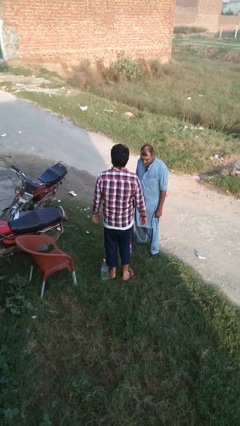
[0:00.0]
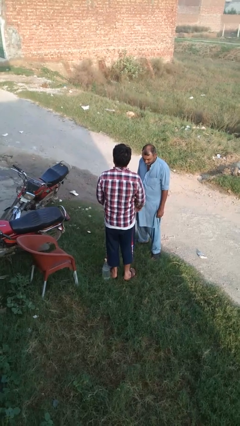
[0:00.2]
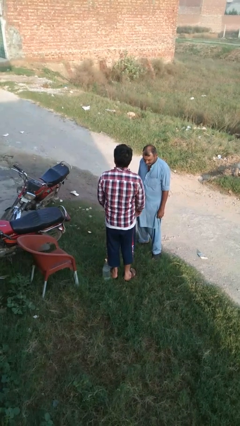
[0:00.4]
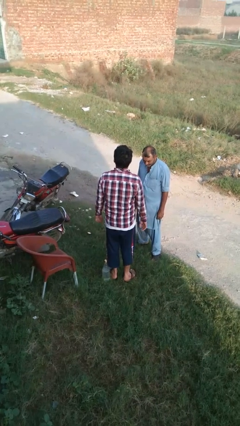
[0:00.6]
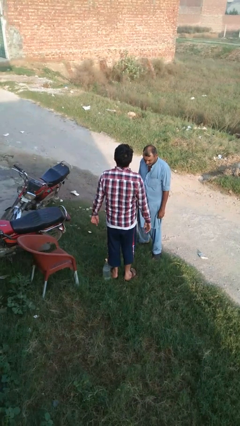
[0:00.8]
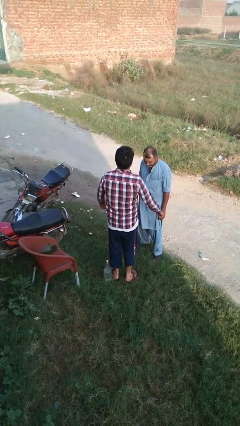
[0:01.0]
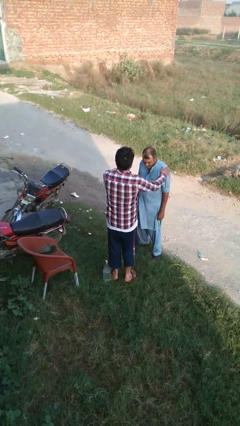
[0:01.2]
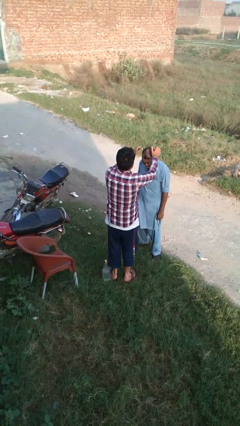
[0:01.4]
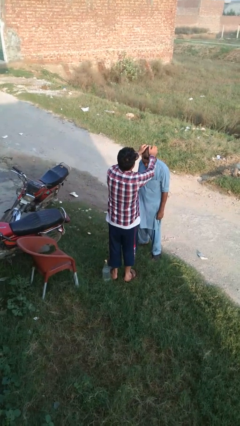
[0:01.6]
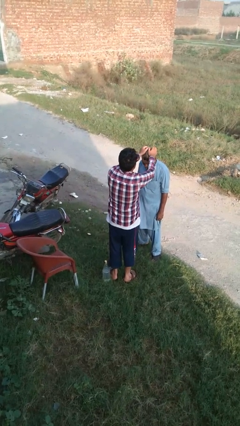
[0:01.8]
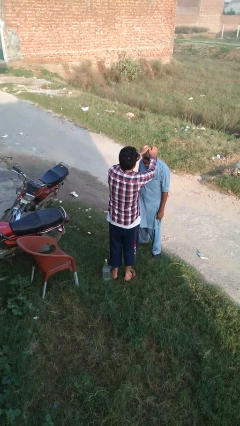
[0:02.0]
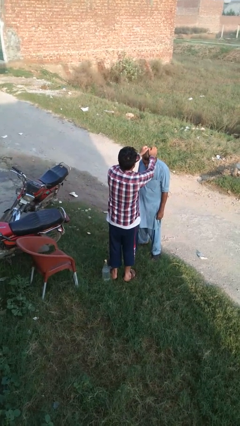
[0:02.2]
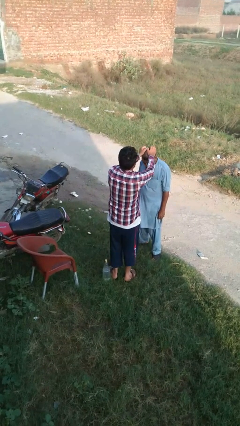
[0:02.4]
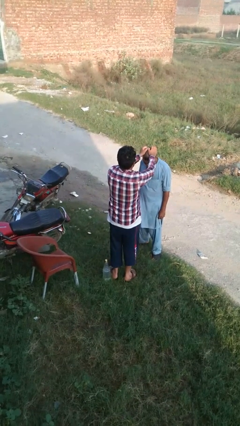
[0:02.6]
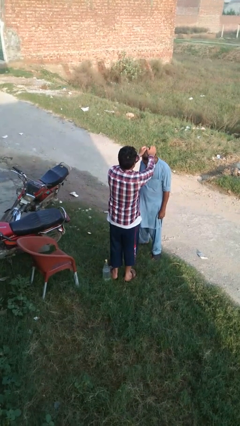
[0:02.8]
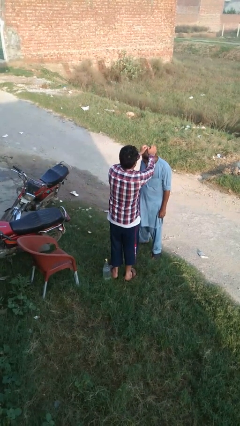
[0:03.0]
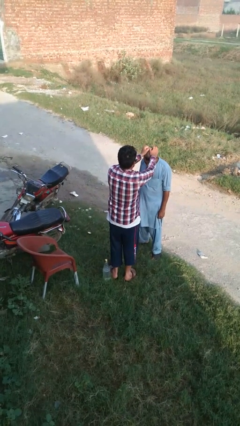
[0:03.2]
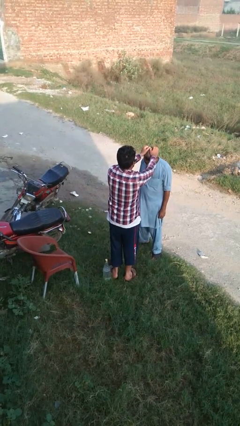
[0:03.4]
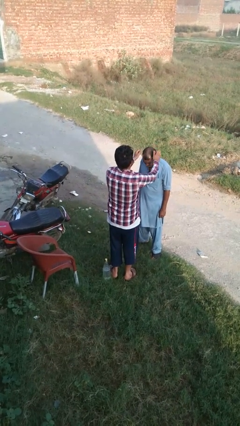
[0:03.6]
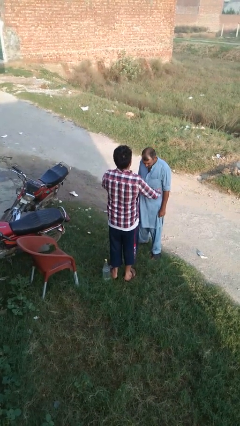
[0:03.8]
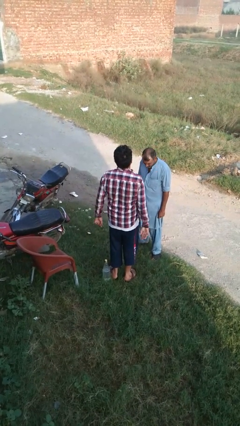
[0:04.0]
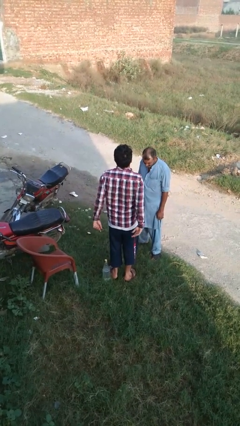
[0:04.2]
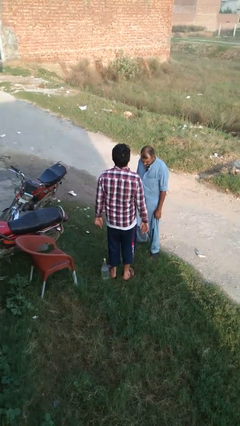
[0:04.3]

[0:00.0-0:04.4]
person grabs person by hair

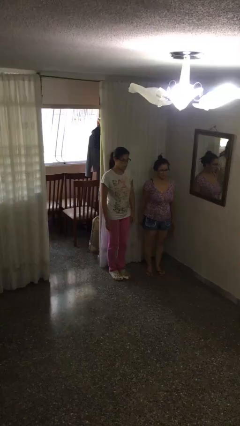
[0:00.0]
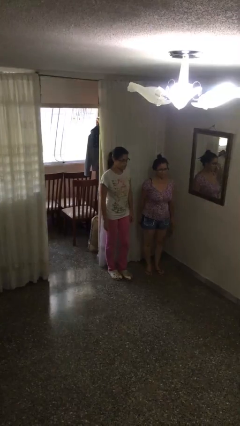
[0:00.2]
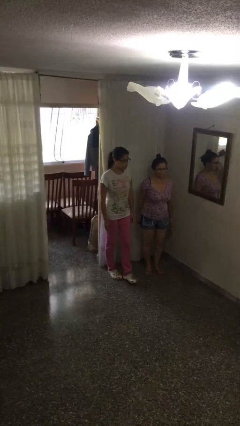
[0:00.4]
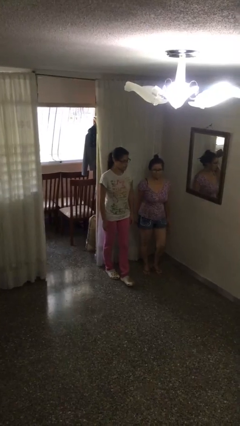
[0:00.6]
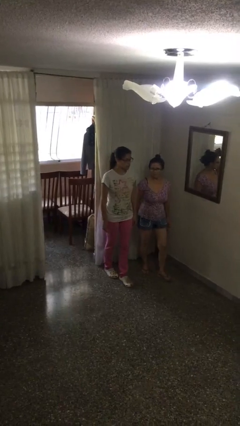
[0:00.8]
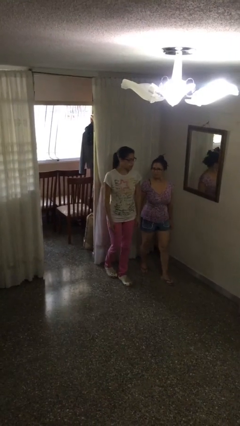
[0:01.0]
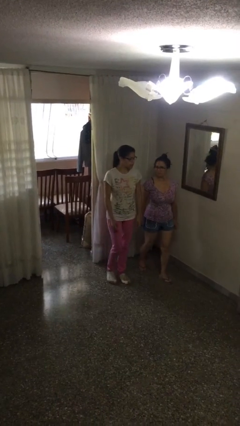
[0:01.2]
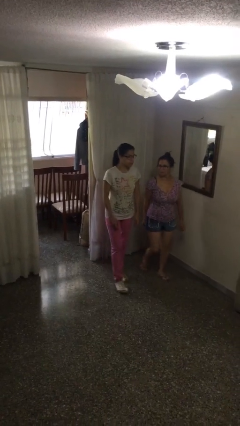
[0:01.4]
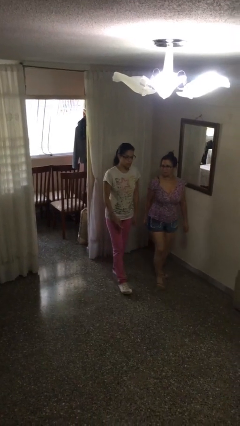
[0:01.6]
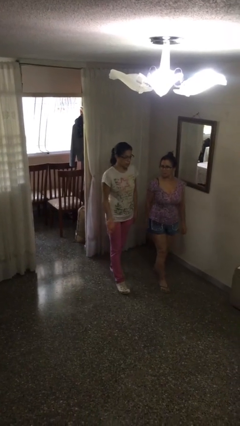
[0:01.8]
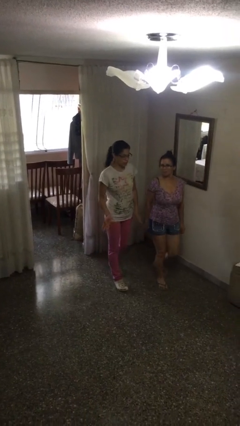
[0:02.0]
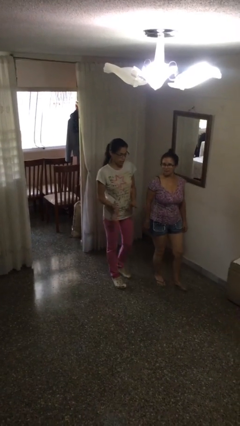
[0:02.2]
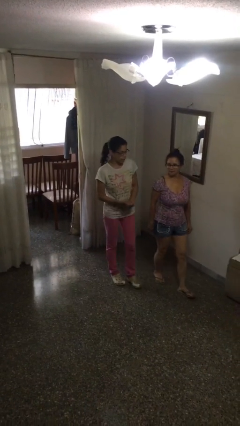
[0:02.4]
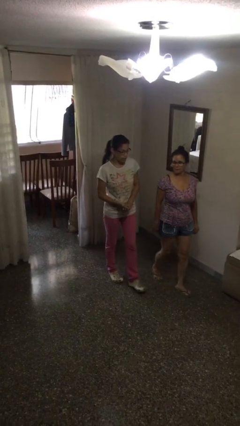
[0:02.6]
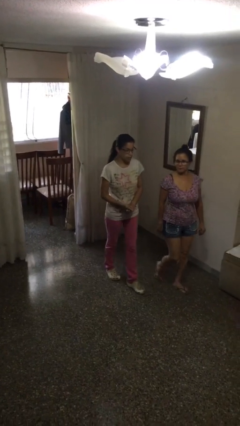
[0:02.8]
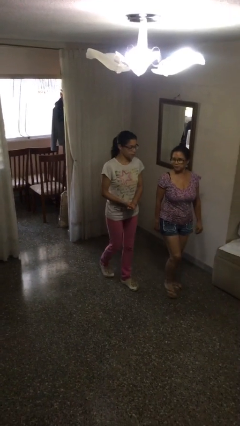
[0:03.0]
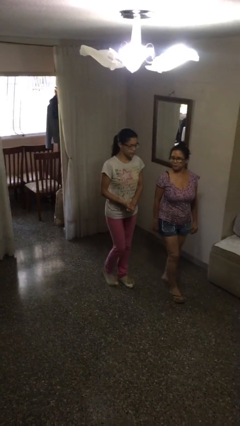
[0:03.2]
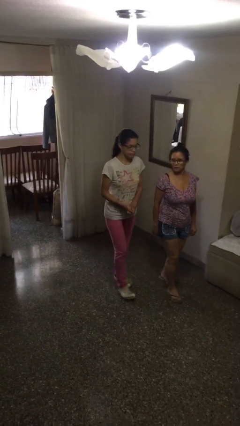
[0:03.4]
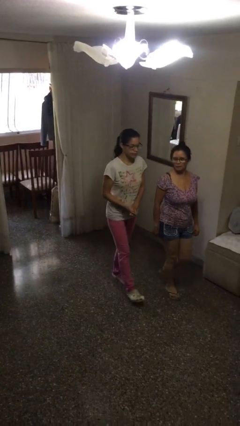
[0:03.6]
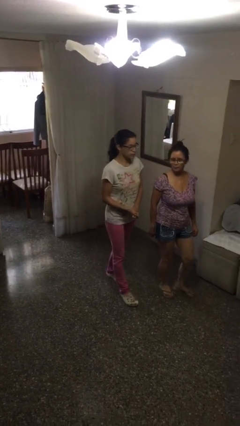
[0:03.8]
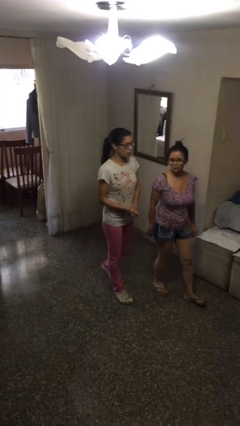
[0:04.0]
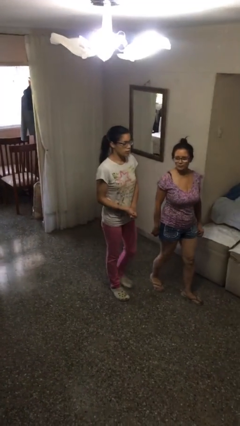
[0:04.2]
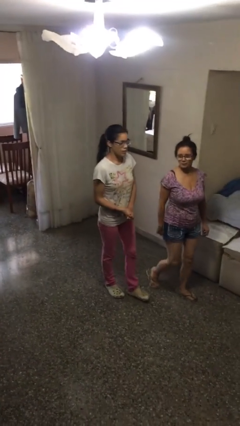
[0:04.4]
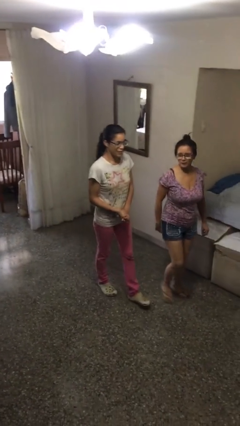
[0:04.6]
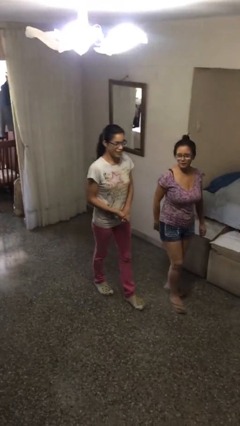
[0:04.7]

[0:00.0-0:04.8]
person talks to person

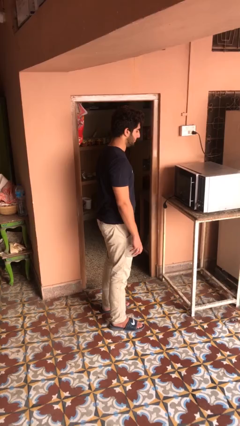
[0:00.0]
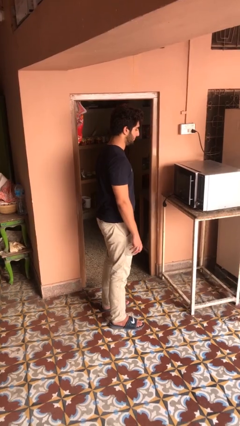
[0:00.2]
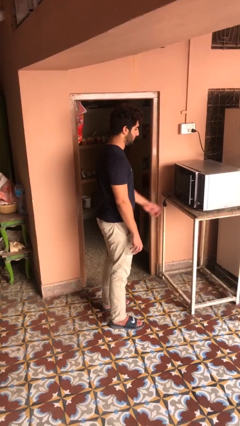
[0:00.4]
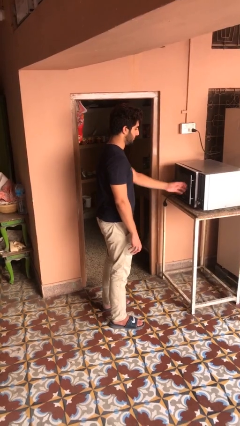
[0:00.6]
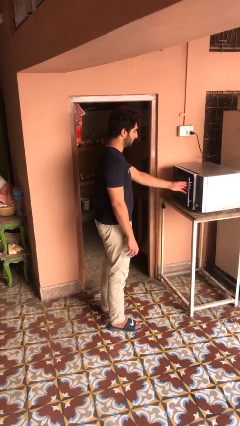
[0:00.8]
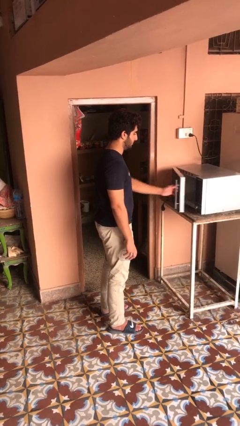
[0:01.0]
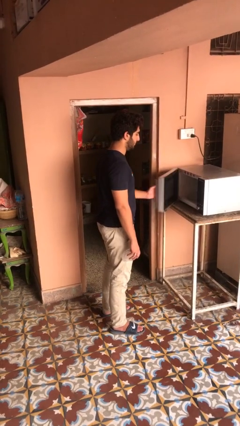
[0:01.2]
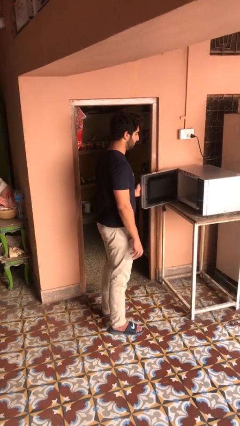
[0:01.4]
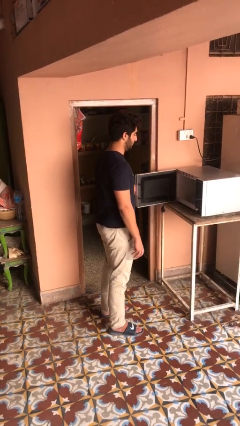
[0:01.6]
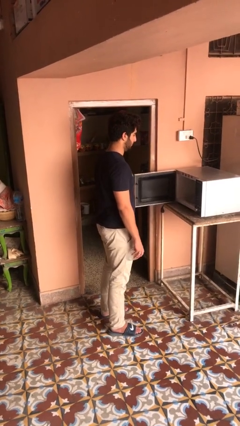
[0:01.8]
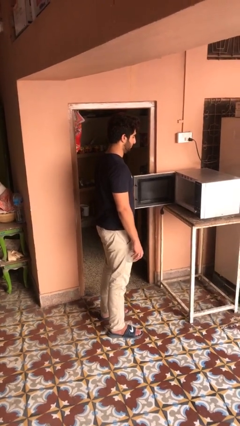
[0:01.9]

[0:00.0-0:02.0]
person opens microwave

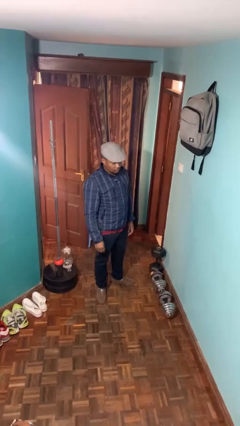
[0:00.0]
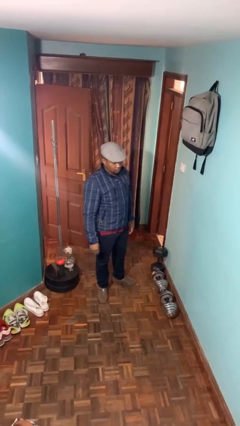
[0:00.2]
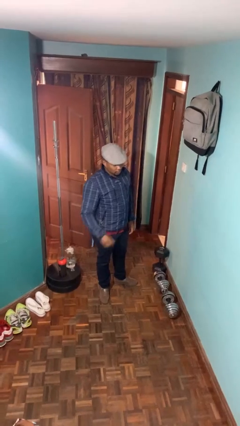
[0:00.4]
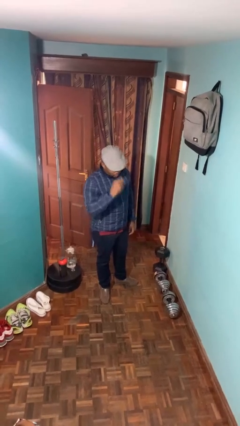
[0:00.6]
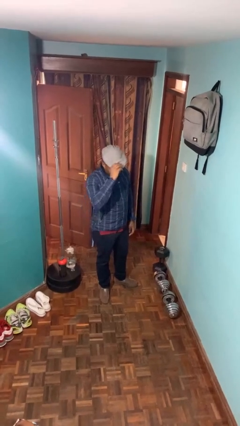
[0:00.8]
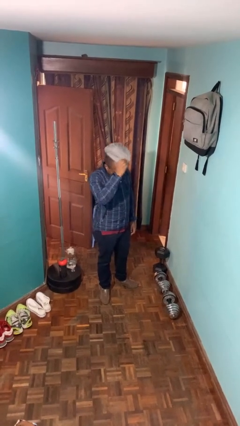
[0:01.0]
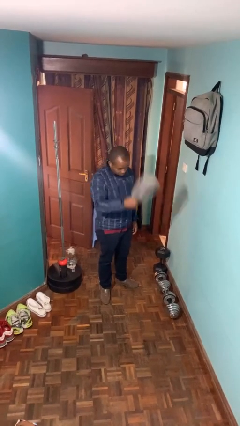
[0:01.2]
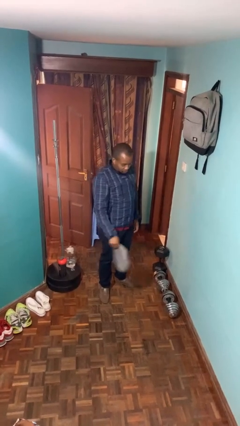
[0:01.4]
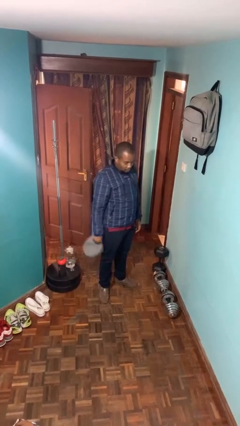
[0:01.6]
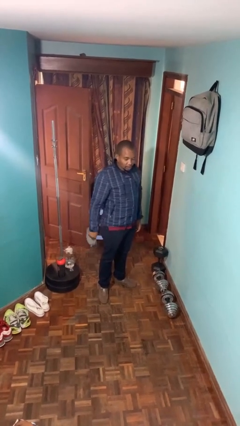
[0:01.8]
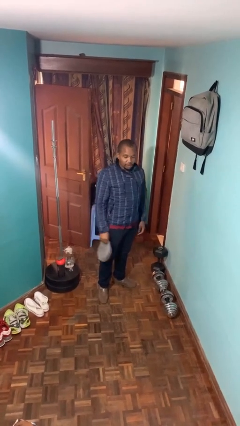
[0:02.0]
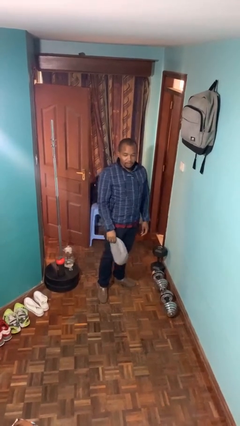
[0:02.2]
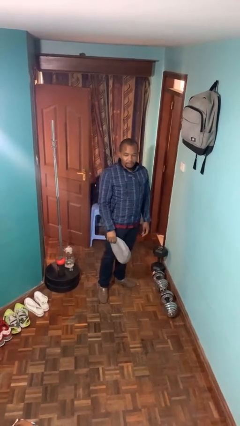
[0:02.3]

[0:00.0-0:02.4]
person takes off hat

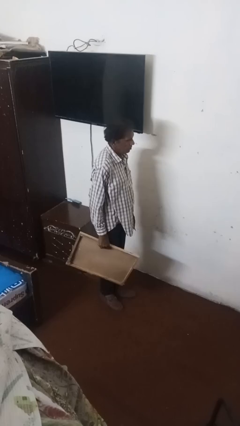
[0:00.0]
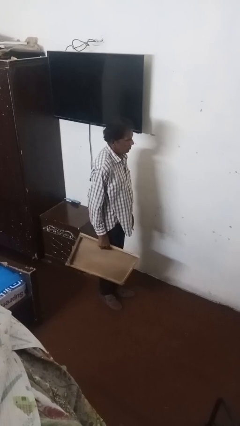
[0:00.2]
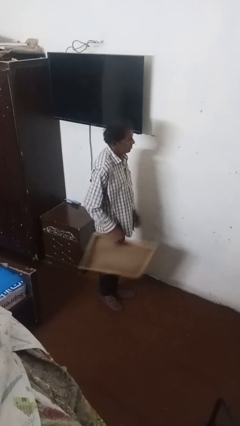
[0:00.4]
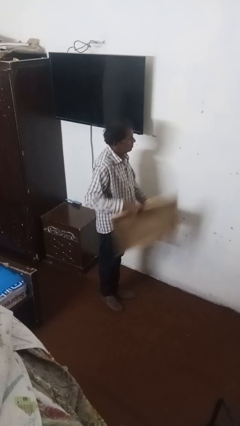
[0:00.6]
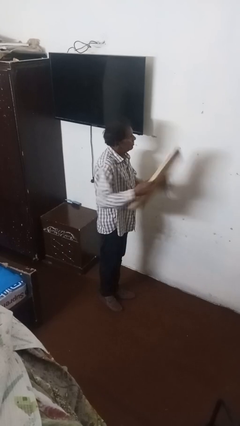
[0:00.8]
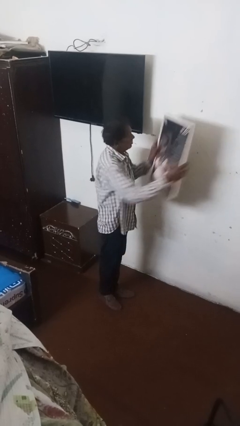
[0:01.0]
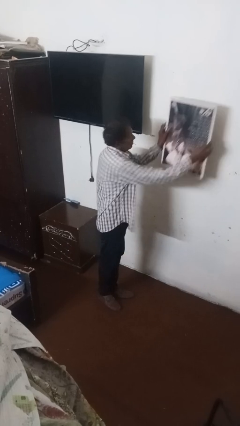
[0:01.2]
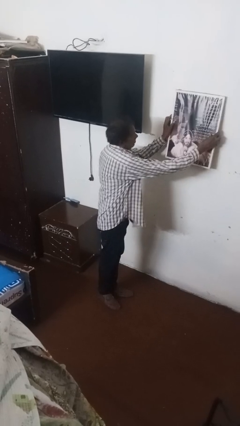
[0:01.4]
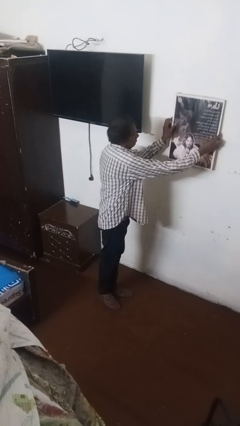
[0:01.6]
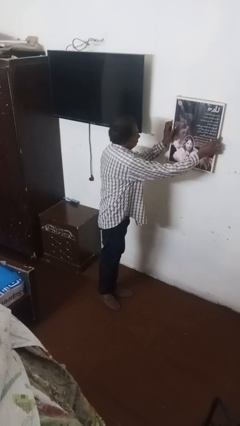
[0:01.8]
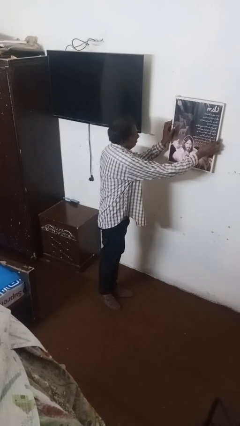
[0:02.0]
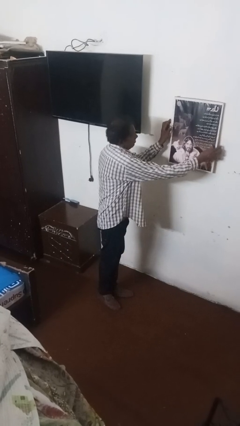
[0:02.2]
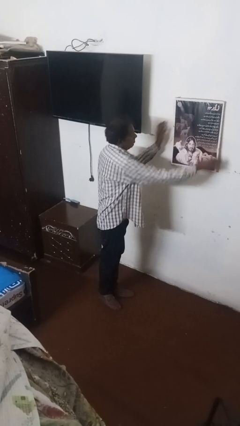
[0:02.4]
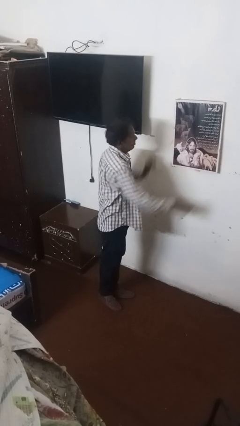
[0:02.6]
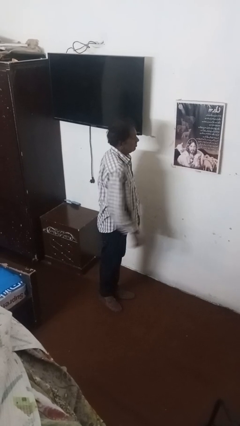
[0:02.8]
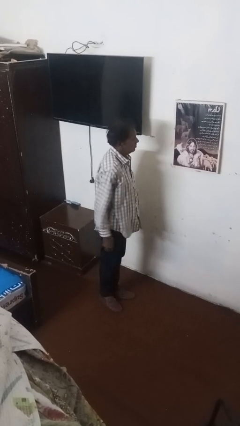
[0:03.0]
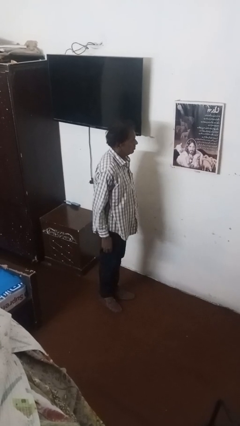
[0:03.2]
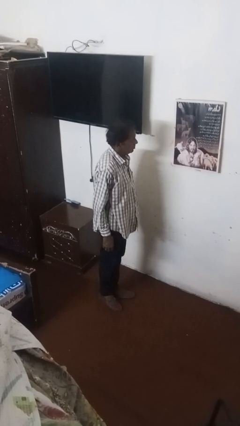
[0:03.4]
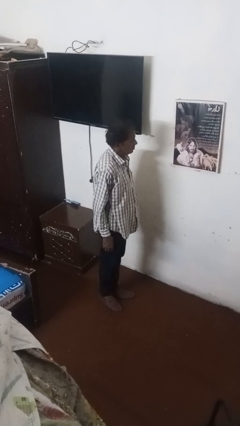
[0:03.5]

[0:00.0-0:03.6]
person puts up picture frame

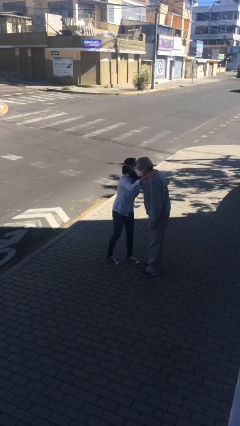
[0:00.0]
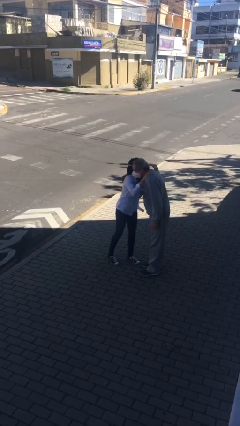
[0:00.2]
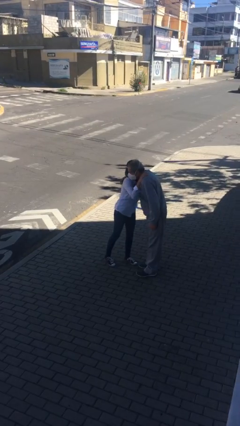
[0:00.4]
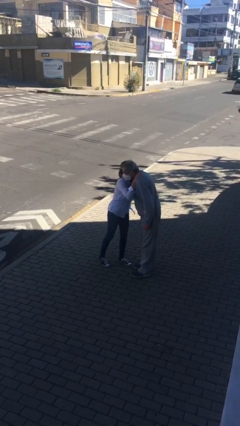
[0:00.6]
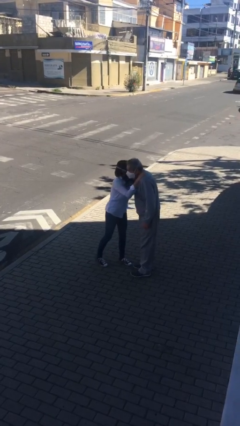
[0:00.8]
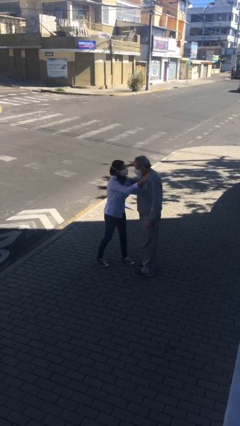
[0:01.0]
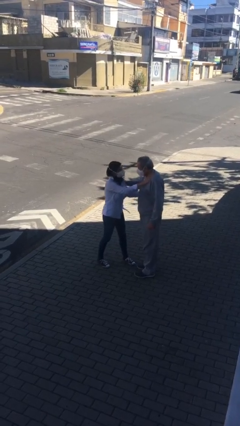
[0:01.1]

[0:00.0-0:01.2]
person embraces person
